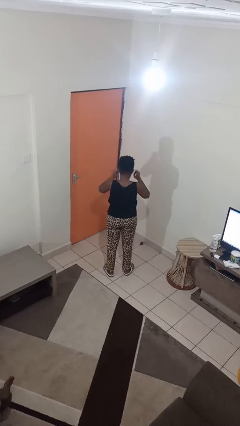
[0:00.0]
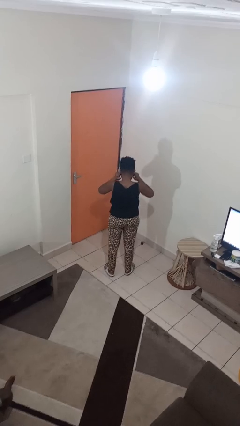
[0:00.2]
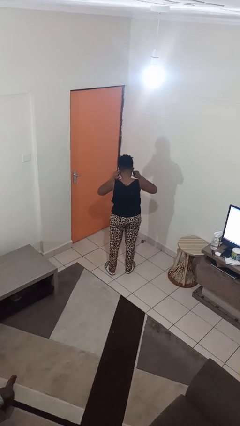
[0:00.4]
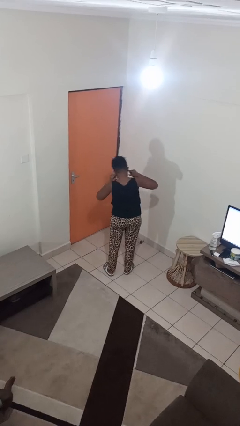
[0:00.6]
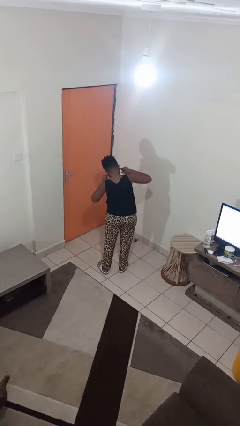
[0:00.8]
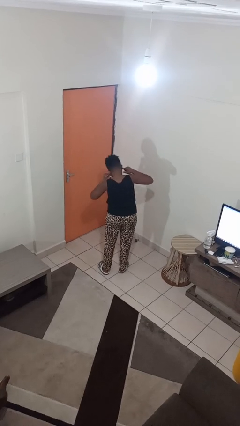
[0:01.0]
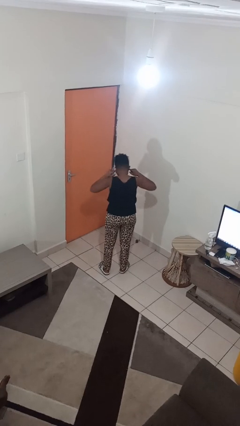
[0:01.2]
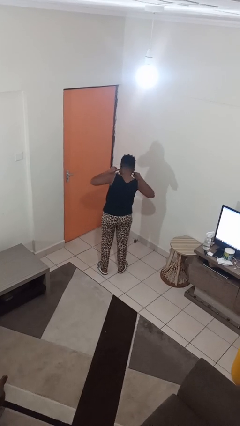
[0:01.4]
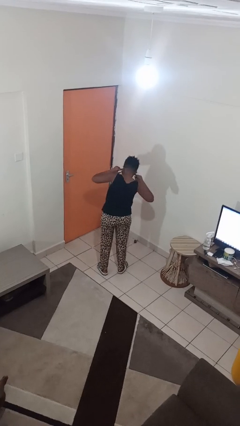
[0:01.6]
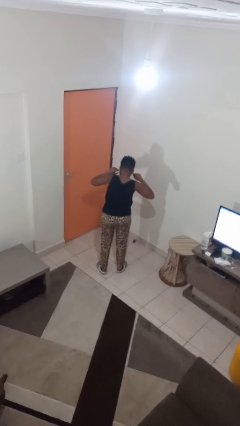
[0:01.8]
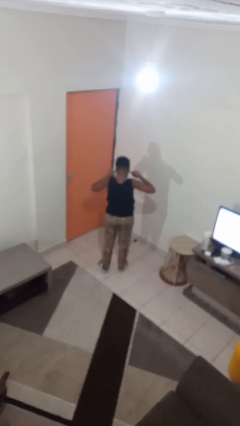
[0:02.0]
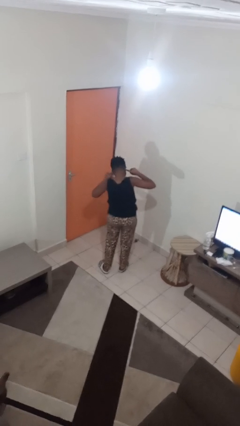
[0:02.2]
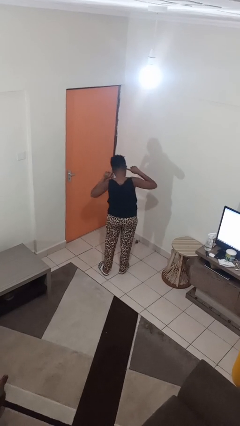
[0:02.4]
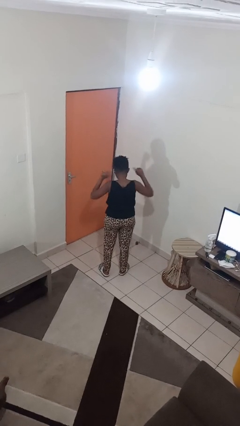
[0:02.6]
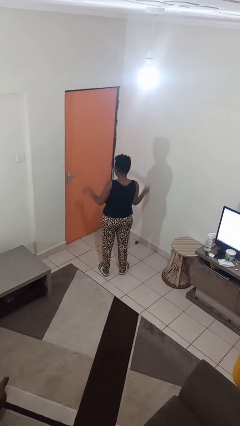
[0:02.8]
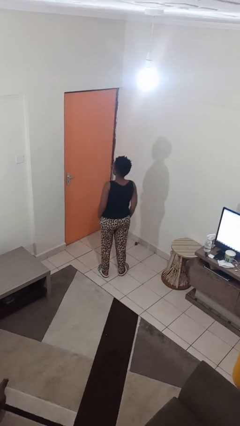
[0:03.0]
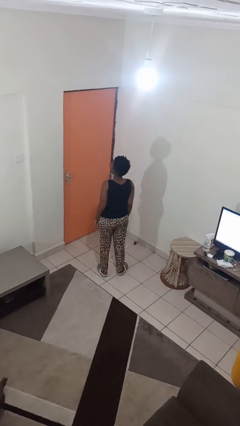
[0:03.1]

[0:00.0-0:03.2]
person puts fingers in ear

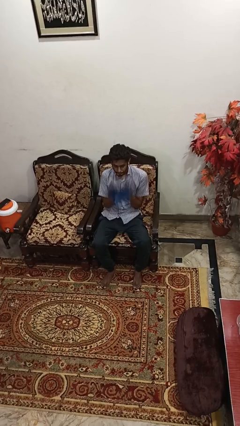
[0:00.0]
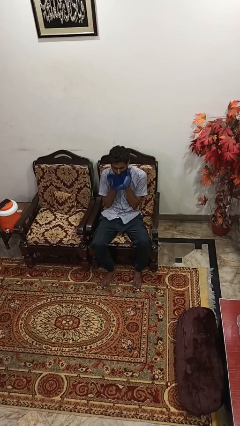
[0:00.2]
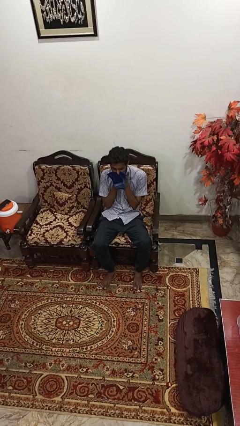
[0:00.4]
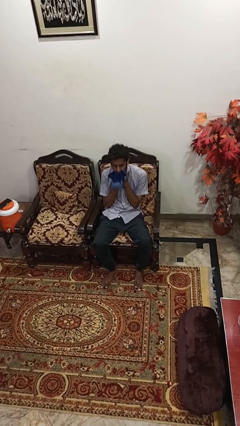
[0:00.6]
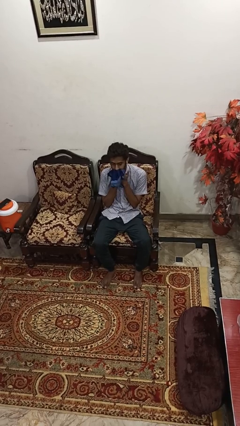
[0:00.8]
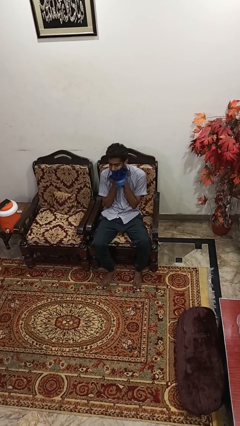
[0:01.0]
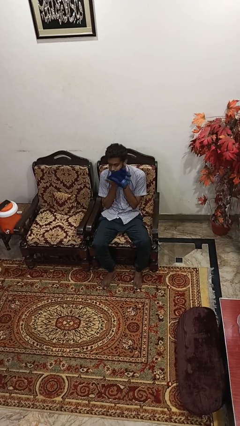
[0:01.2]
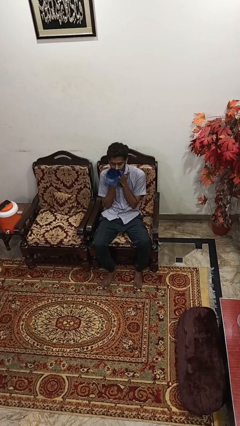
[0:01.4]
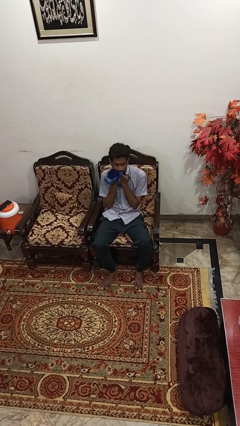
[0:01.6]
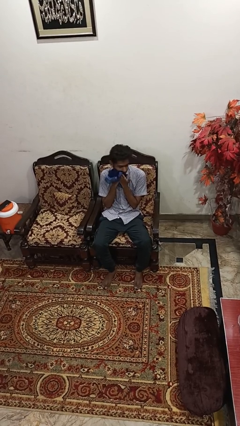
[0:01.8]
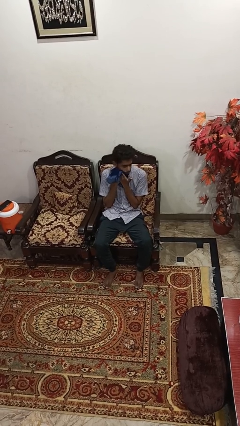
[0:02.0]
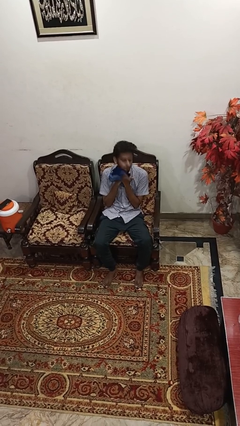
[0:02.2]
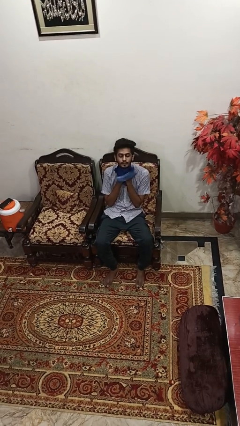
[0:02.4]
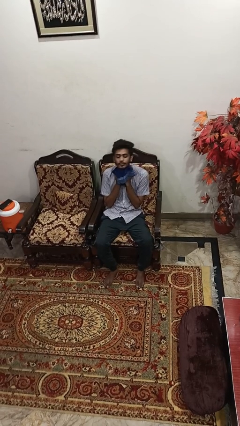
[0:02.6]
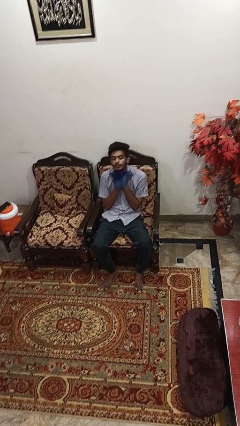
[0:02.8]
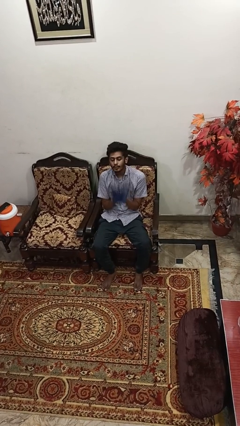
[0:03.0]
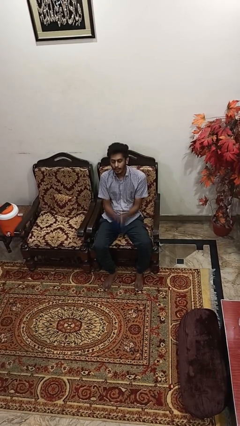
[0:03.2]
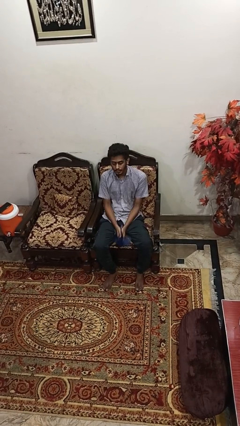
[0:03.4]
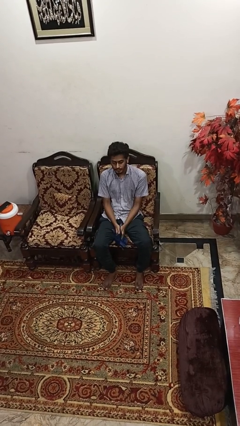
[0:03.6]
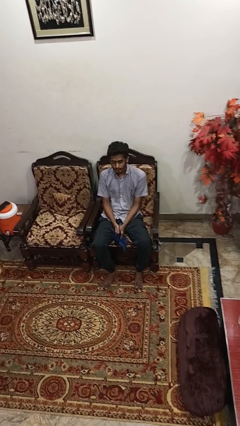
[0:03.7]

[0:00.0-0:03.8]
person wipes mouth with napkin

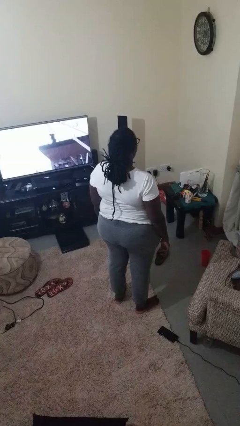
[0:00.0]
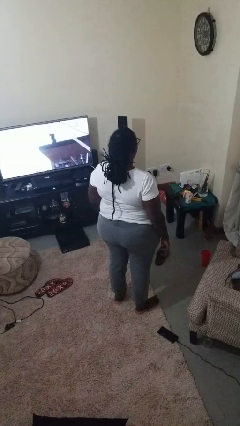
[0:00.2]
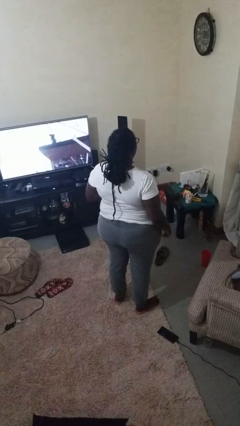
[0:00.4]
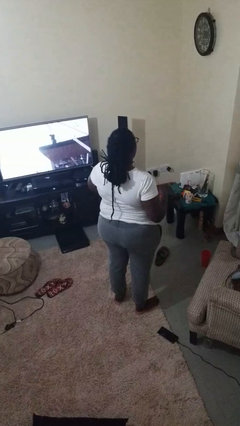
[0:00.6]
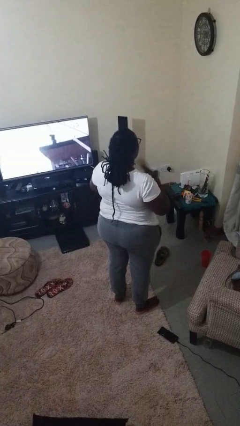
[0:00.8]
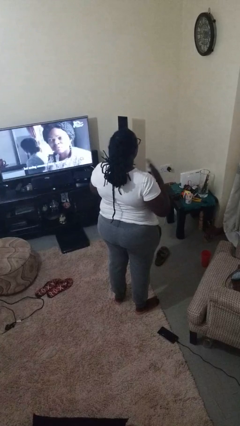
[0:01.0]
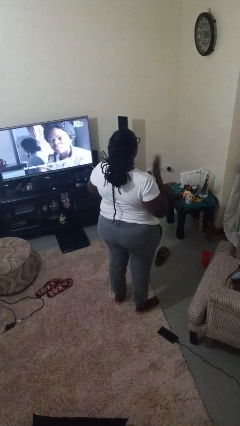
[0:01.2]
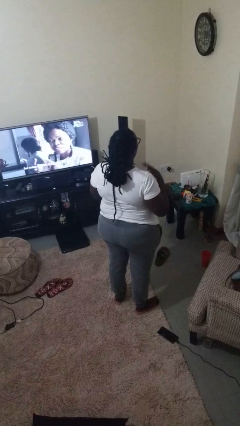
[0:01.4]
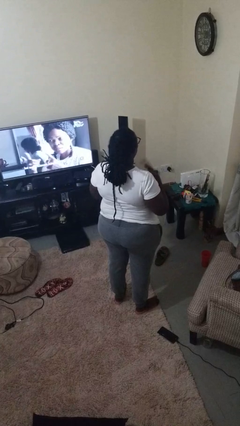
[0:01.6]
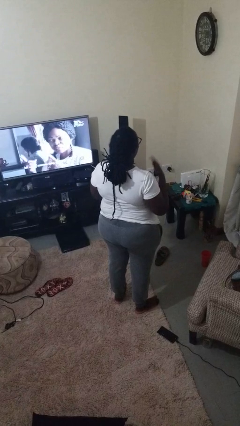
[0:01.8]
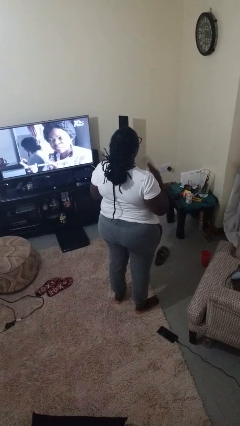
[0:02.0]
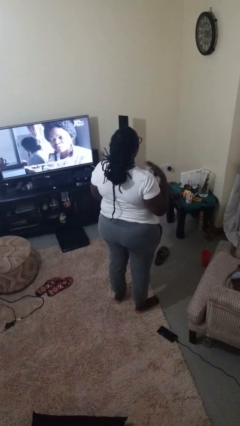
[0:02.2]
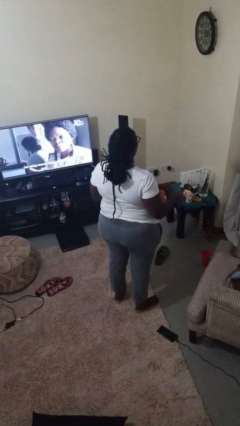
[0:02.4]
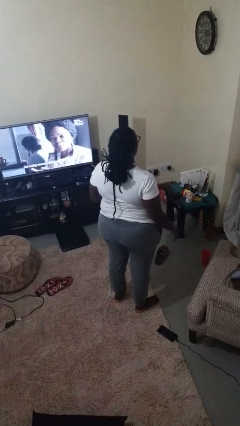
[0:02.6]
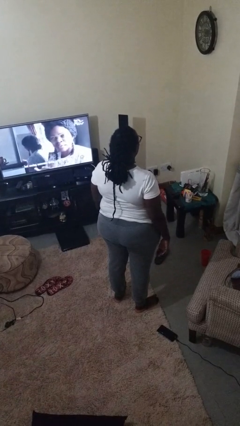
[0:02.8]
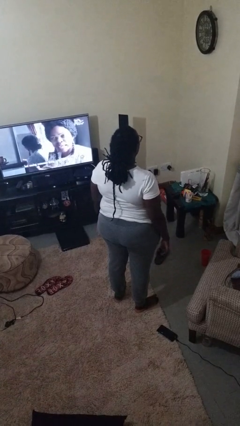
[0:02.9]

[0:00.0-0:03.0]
person drums on chest

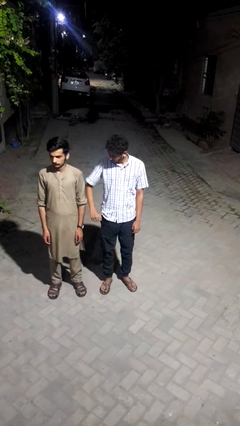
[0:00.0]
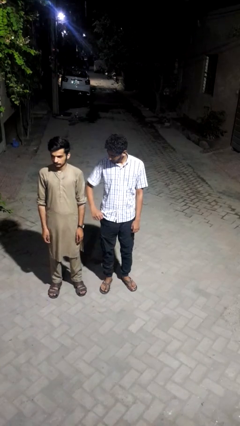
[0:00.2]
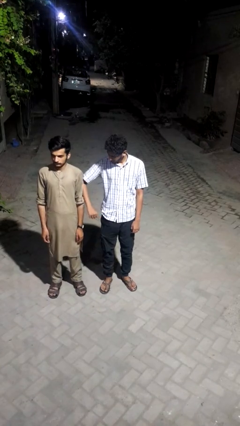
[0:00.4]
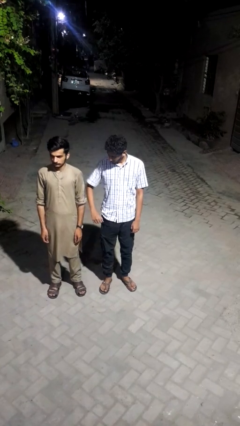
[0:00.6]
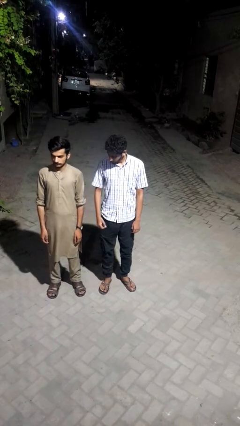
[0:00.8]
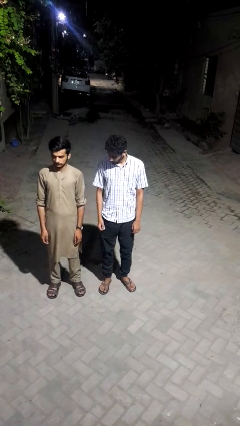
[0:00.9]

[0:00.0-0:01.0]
person nudges person with elbow

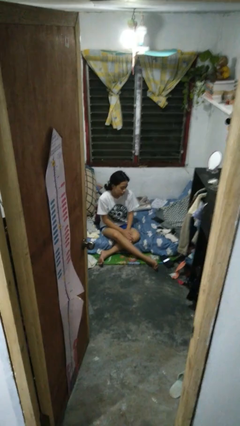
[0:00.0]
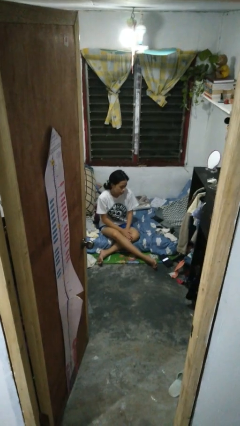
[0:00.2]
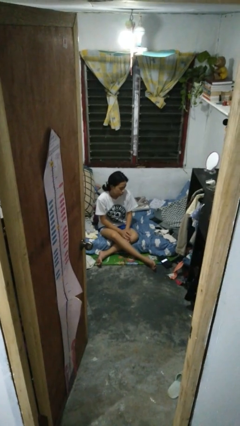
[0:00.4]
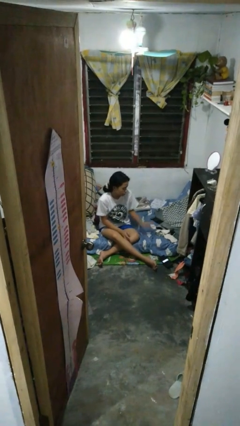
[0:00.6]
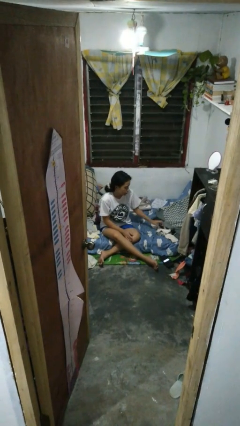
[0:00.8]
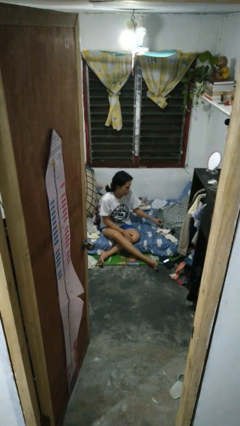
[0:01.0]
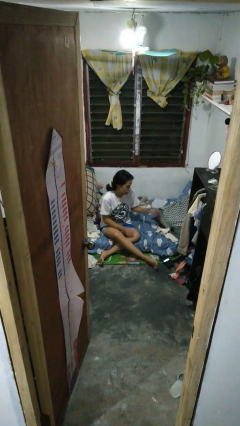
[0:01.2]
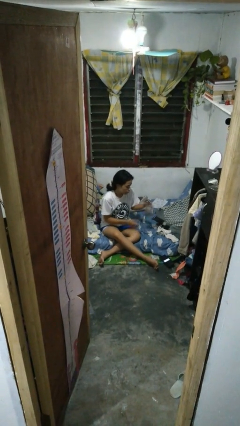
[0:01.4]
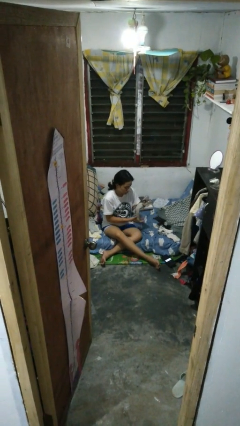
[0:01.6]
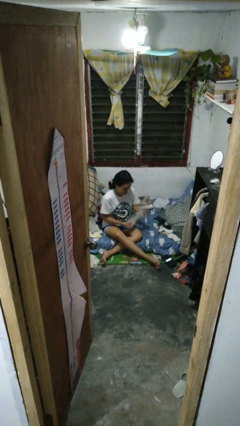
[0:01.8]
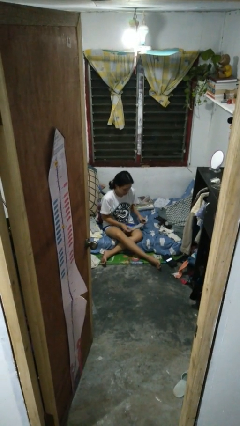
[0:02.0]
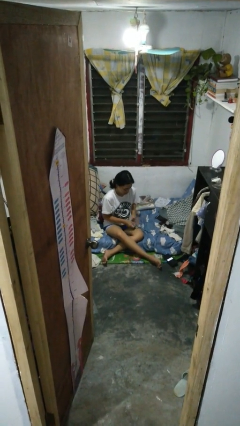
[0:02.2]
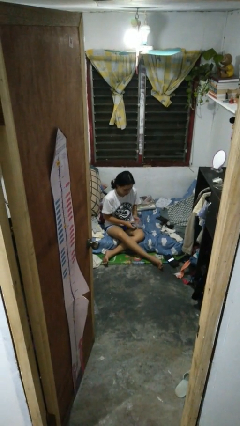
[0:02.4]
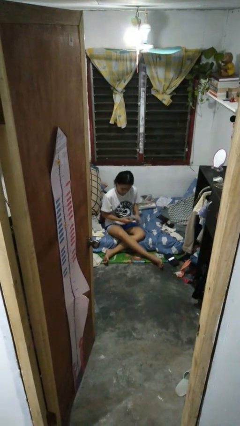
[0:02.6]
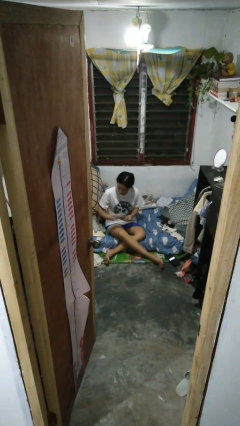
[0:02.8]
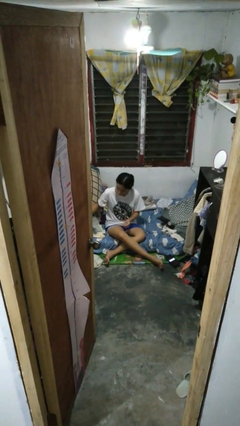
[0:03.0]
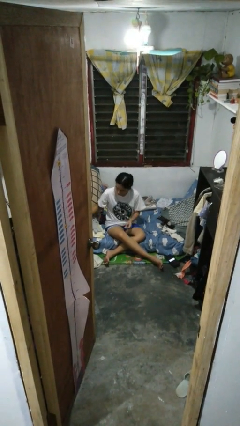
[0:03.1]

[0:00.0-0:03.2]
person folds socks

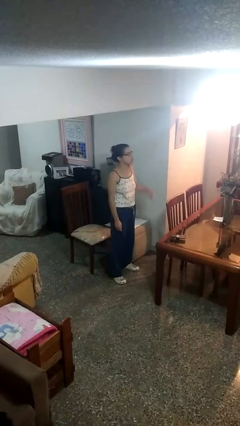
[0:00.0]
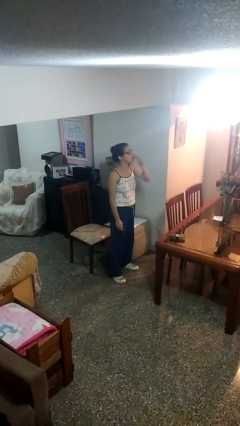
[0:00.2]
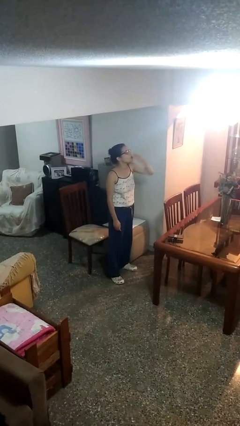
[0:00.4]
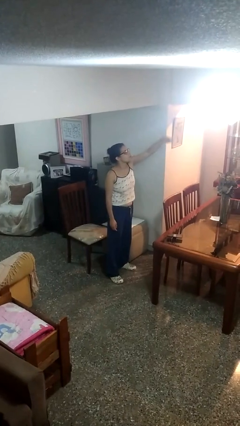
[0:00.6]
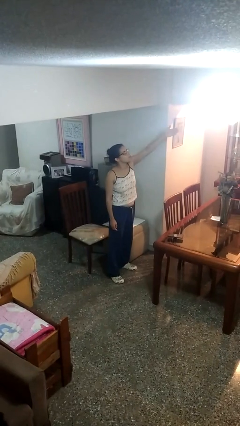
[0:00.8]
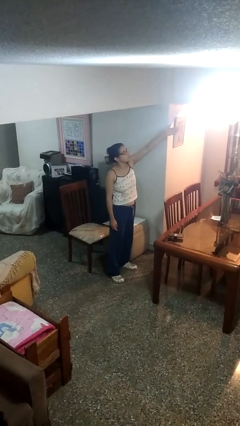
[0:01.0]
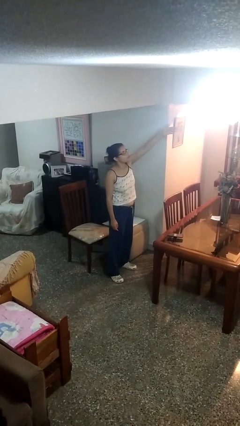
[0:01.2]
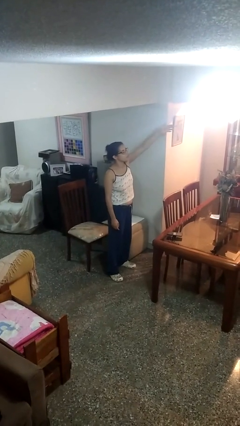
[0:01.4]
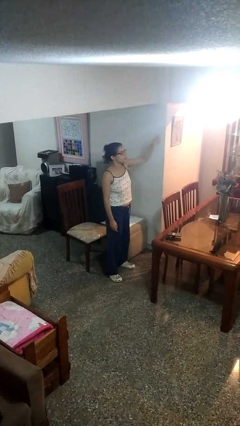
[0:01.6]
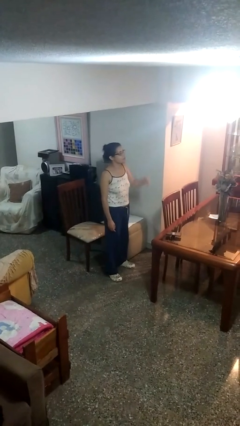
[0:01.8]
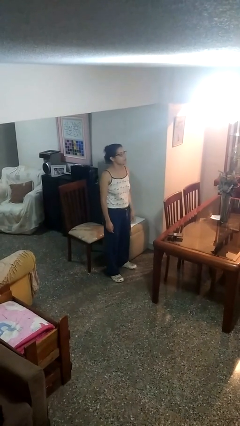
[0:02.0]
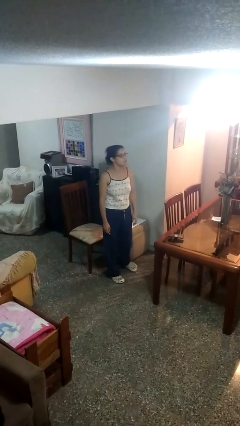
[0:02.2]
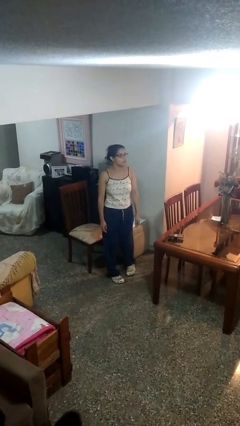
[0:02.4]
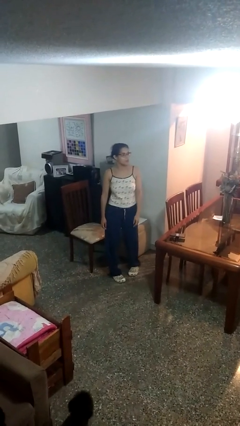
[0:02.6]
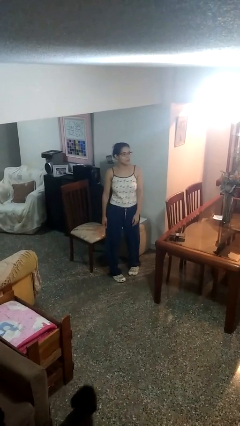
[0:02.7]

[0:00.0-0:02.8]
person gestures blow kiss
